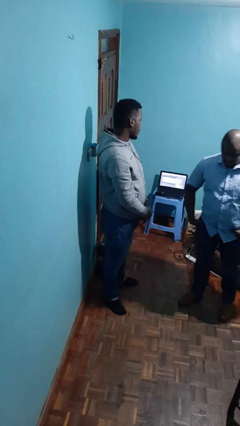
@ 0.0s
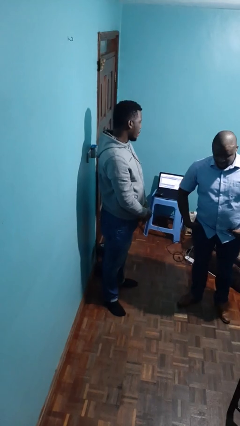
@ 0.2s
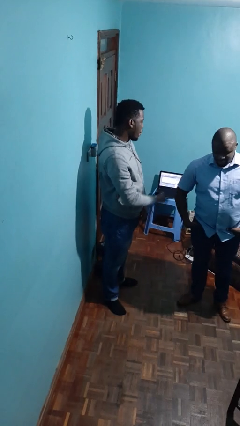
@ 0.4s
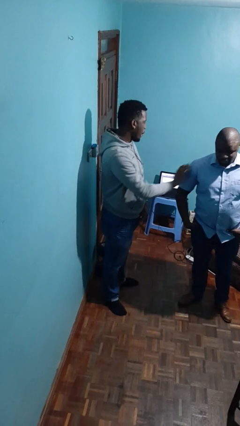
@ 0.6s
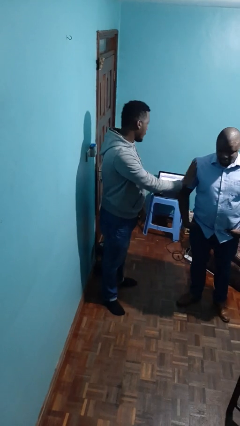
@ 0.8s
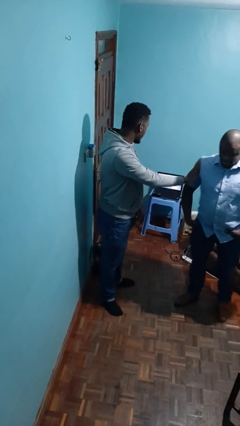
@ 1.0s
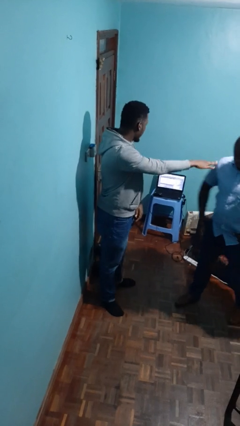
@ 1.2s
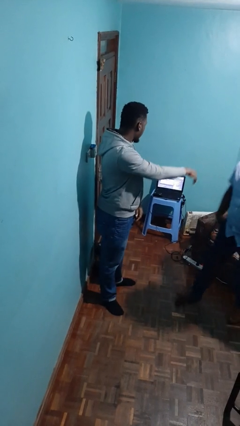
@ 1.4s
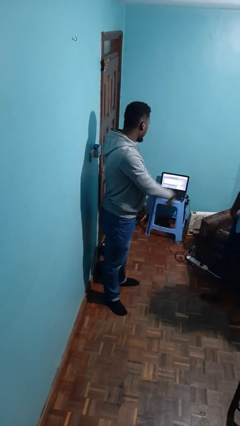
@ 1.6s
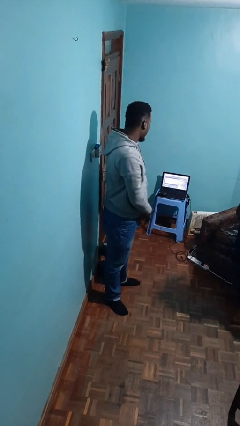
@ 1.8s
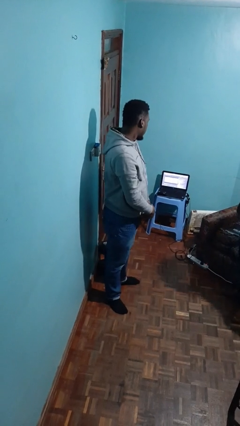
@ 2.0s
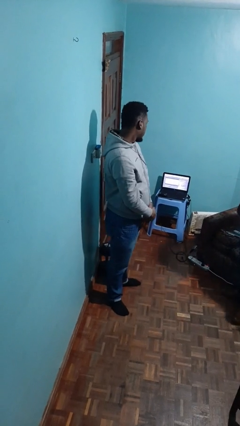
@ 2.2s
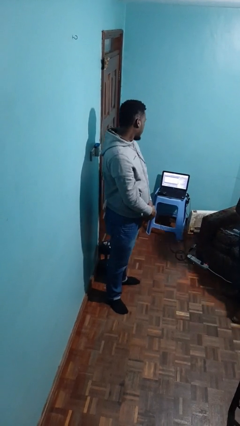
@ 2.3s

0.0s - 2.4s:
person shoves person

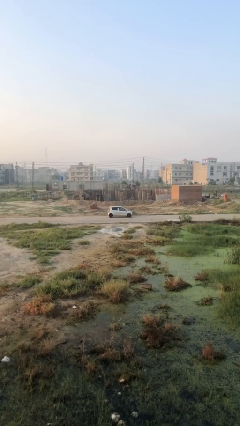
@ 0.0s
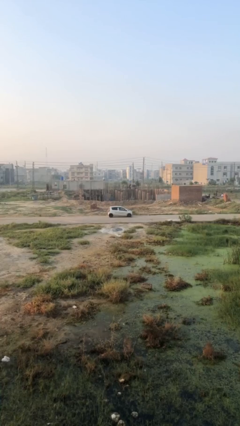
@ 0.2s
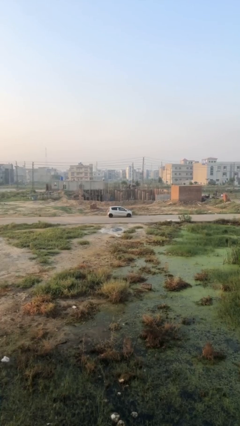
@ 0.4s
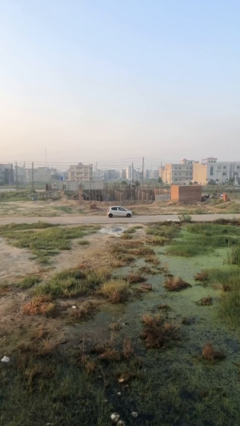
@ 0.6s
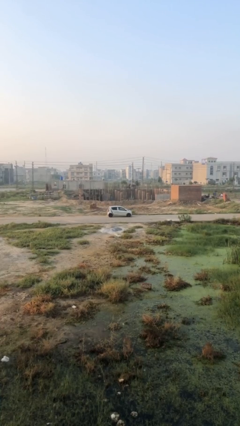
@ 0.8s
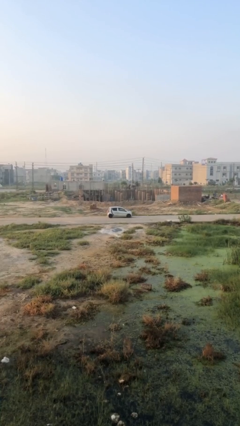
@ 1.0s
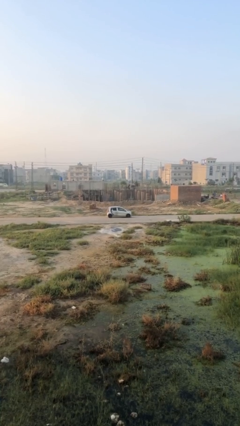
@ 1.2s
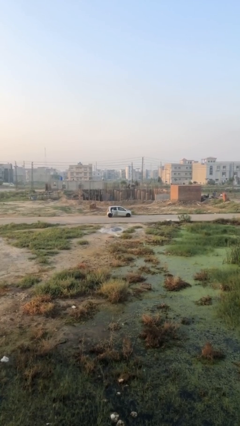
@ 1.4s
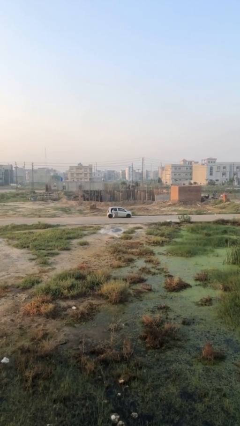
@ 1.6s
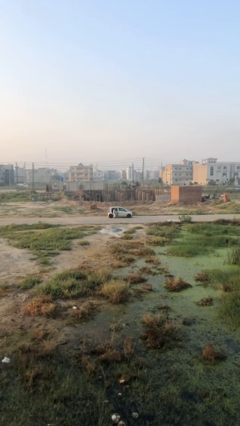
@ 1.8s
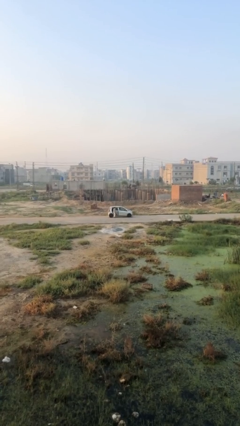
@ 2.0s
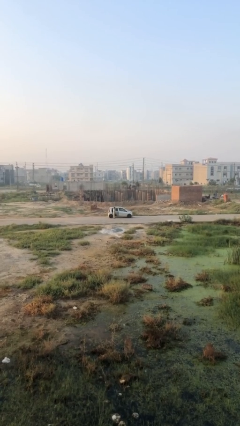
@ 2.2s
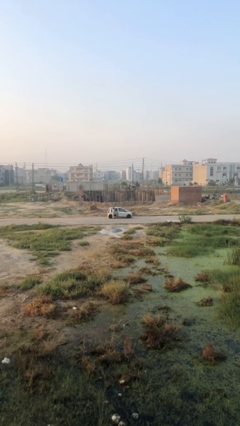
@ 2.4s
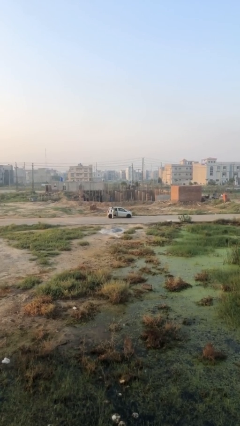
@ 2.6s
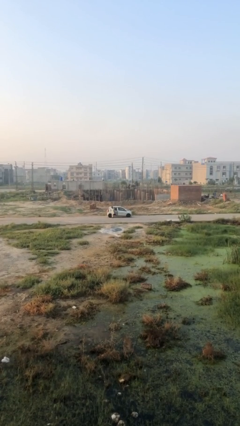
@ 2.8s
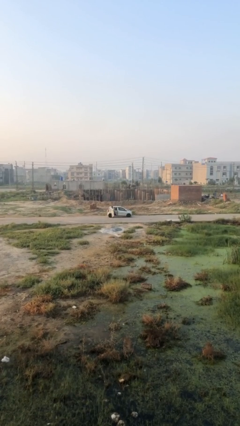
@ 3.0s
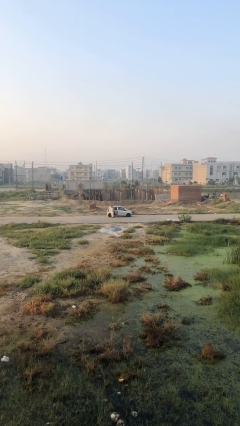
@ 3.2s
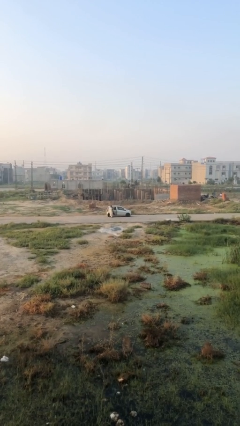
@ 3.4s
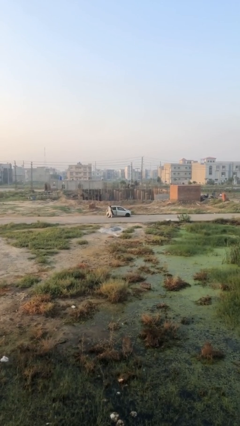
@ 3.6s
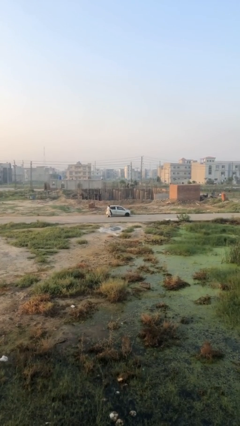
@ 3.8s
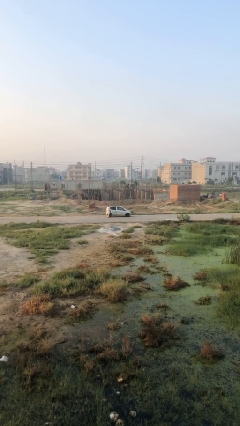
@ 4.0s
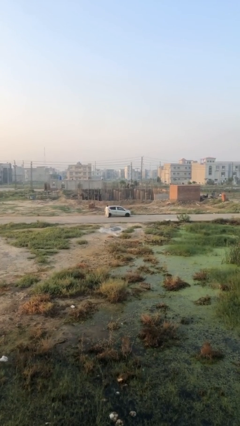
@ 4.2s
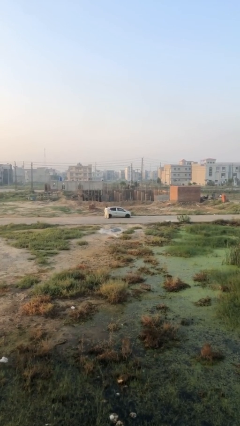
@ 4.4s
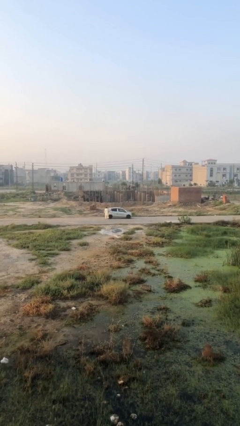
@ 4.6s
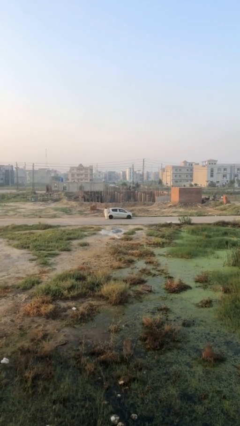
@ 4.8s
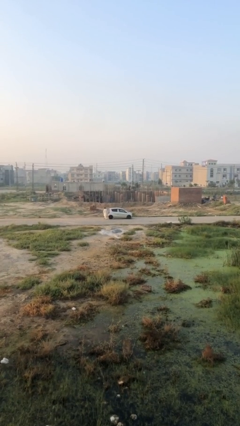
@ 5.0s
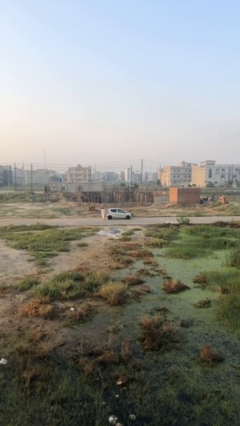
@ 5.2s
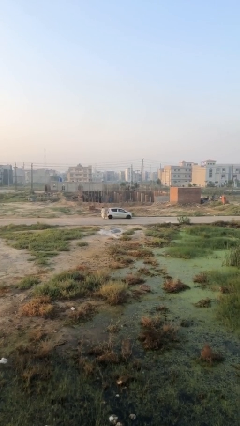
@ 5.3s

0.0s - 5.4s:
car drops off person

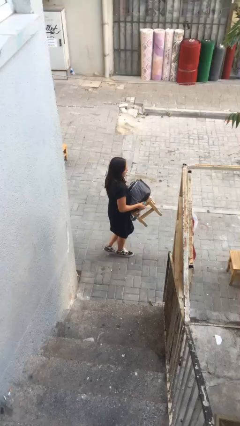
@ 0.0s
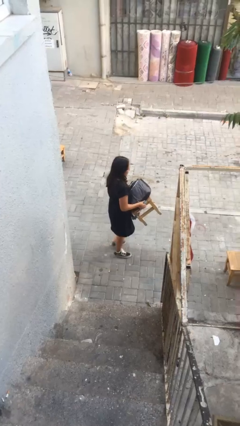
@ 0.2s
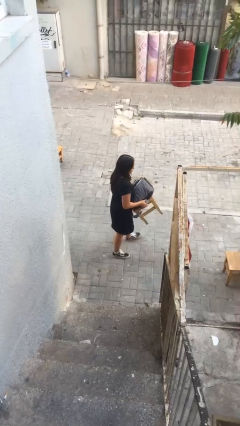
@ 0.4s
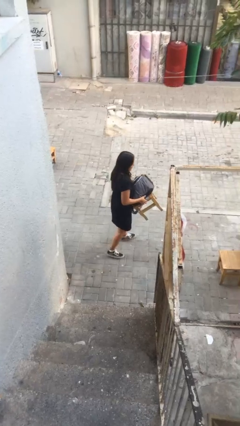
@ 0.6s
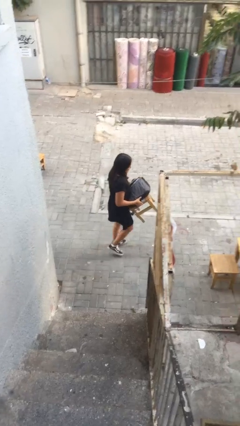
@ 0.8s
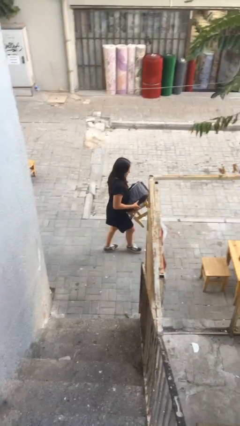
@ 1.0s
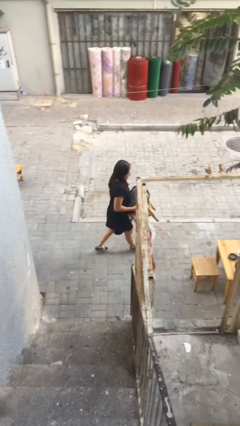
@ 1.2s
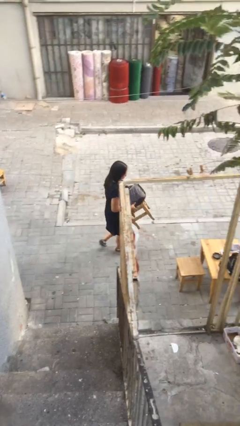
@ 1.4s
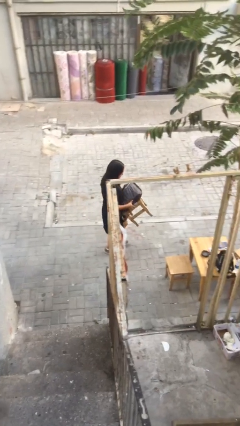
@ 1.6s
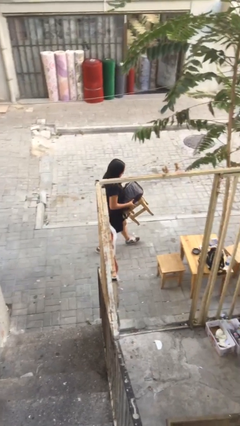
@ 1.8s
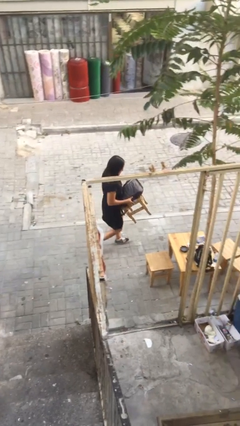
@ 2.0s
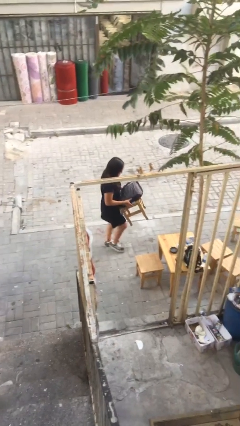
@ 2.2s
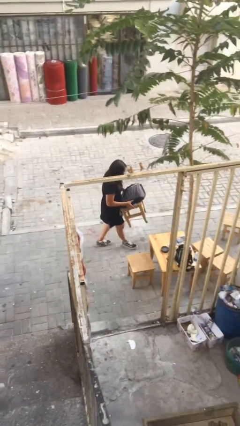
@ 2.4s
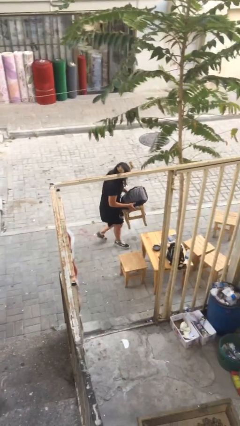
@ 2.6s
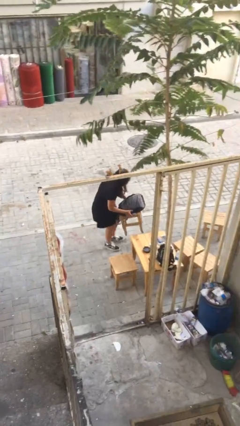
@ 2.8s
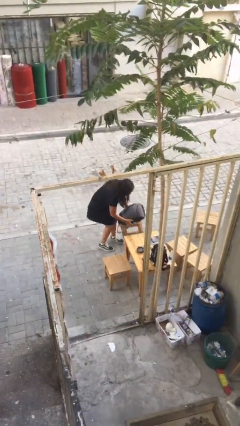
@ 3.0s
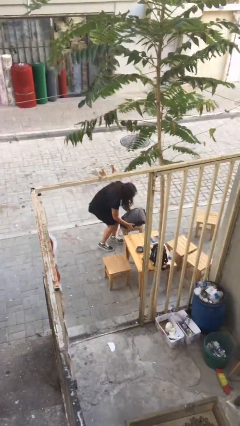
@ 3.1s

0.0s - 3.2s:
person carries heavy object

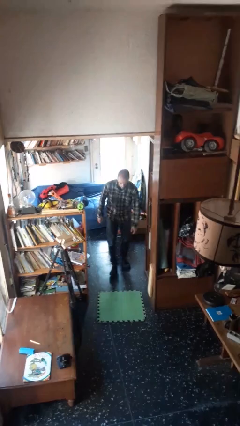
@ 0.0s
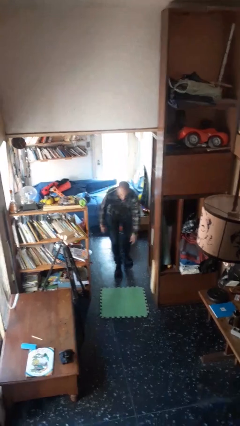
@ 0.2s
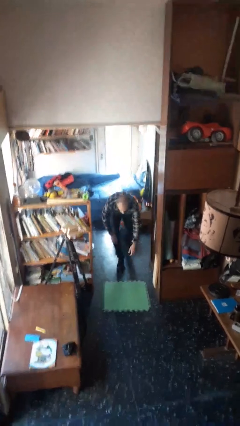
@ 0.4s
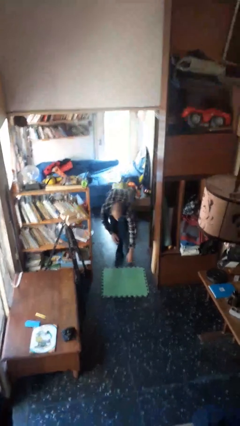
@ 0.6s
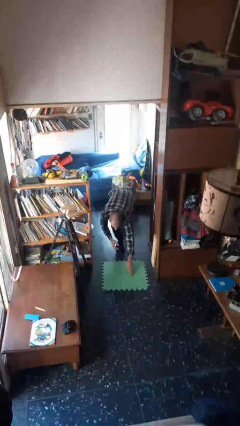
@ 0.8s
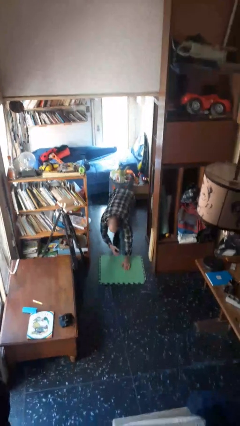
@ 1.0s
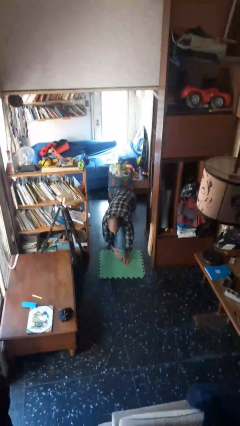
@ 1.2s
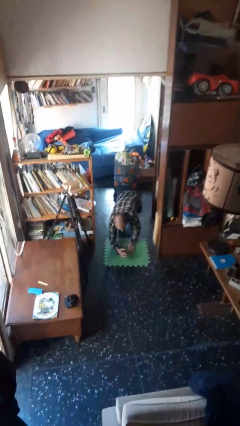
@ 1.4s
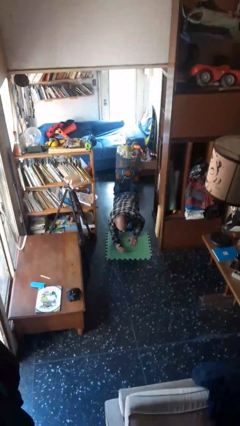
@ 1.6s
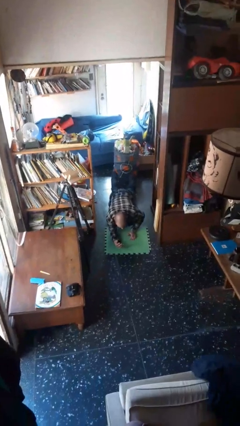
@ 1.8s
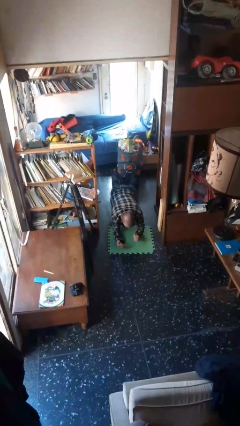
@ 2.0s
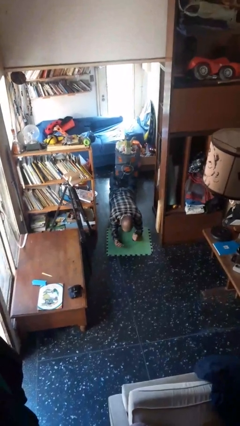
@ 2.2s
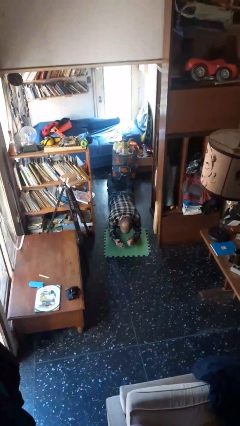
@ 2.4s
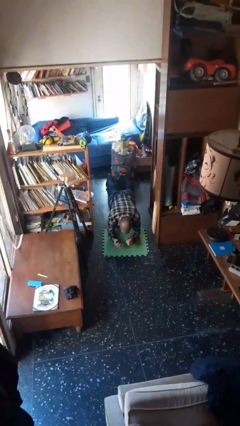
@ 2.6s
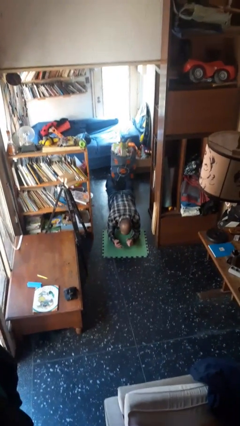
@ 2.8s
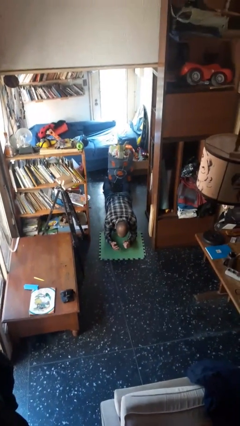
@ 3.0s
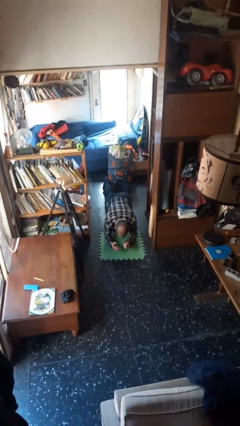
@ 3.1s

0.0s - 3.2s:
person exercises with plank

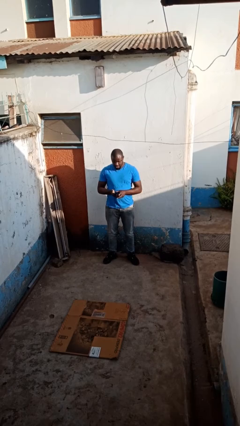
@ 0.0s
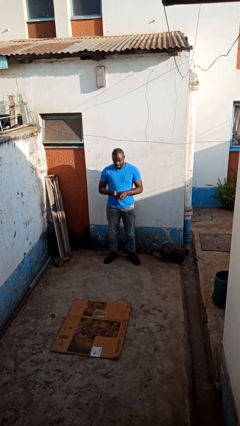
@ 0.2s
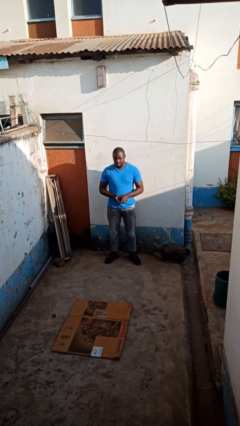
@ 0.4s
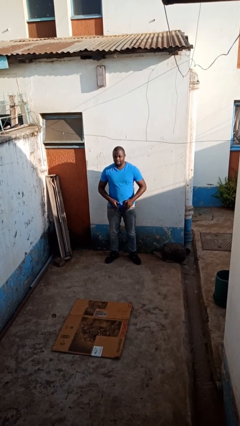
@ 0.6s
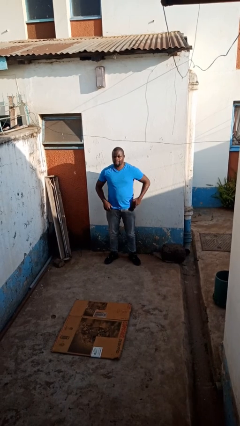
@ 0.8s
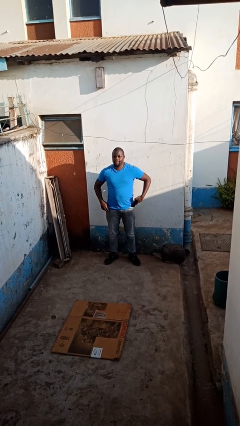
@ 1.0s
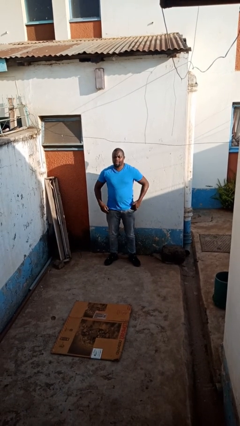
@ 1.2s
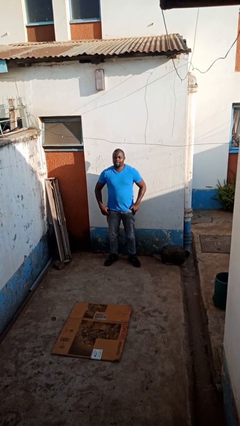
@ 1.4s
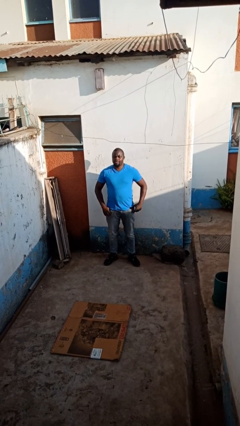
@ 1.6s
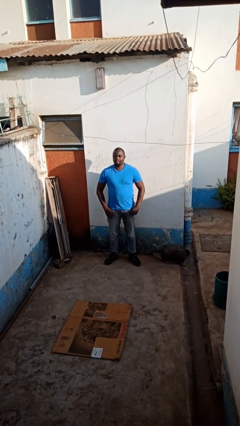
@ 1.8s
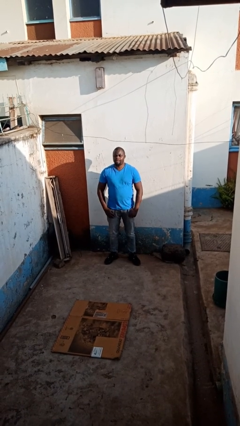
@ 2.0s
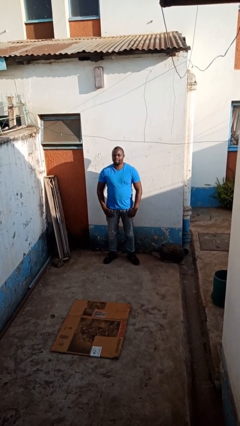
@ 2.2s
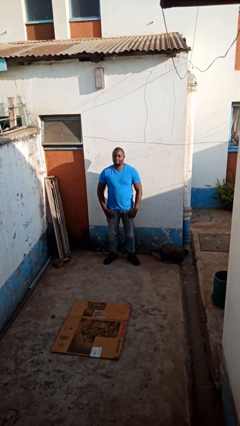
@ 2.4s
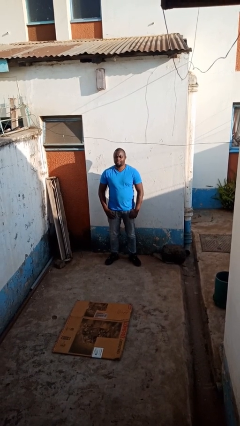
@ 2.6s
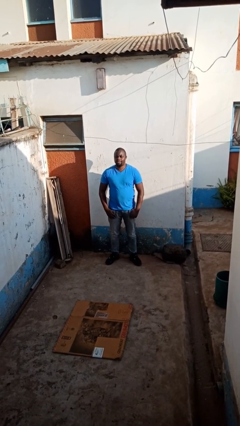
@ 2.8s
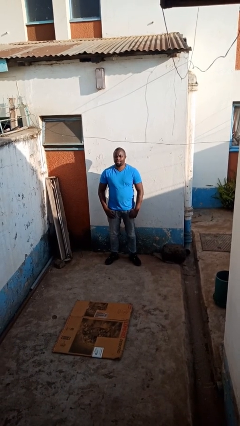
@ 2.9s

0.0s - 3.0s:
person puts phone into pocket
